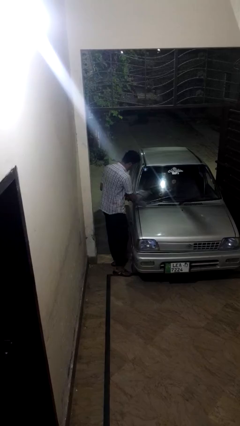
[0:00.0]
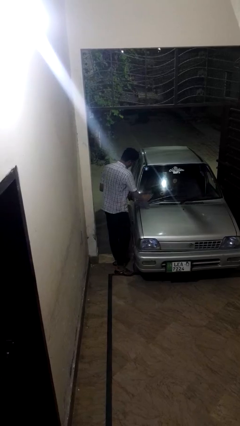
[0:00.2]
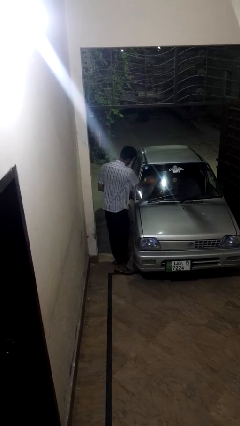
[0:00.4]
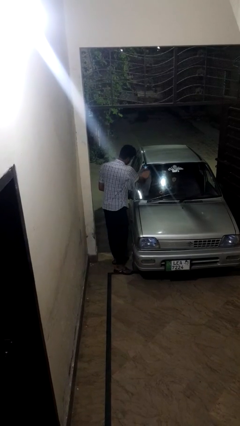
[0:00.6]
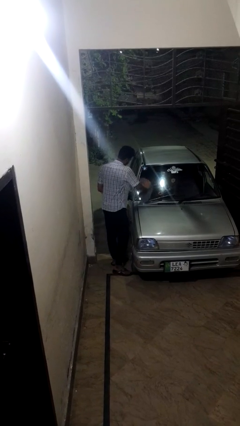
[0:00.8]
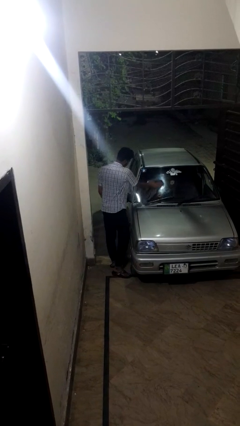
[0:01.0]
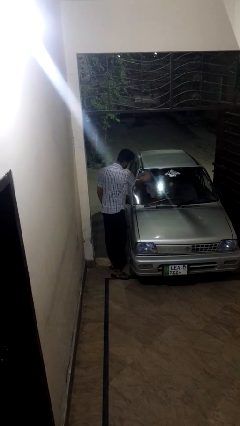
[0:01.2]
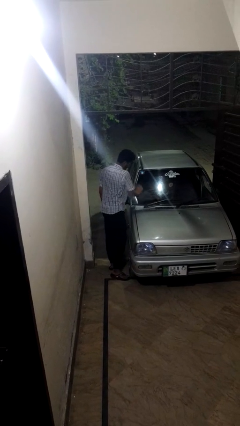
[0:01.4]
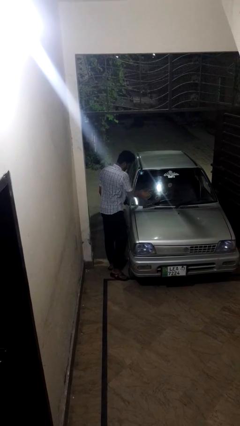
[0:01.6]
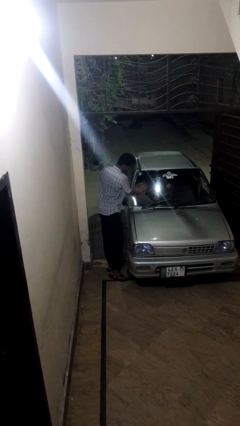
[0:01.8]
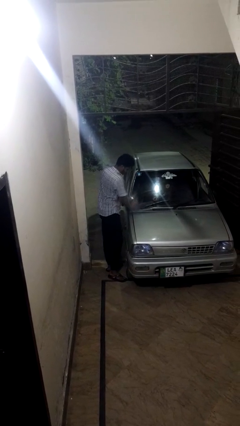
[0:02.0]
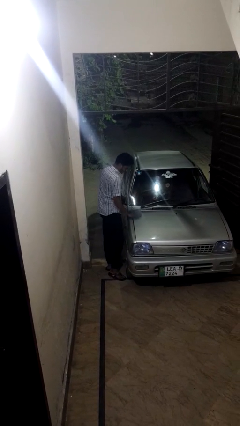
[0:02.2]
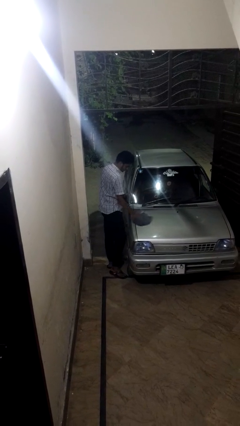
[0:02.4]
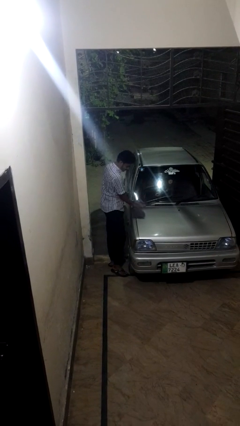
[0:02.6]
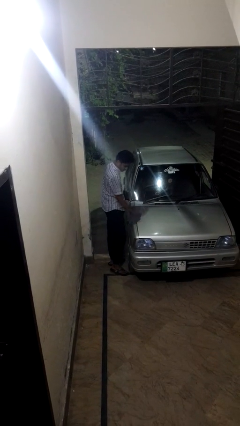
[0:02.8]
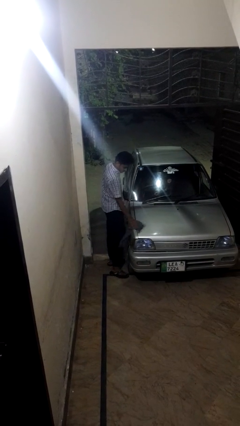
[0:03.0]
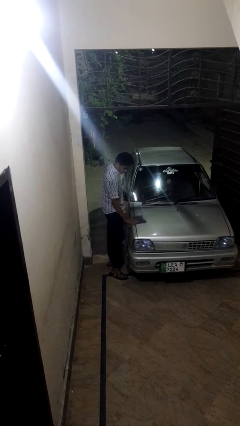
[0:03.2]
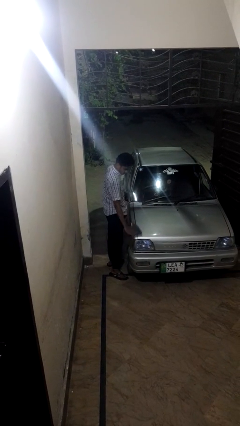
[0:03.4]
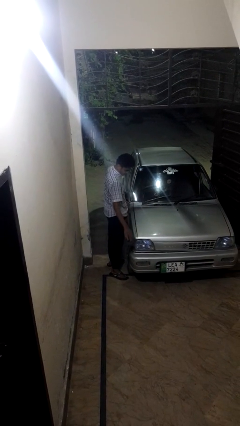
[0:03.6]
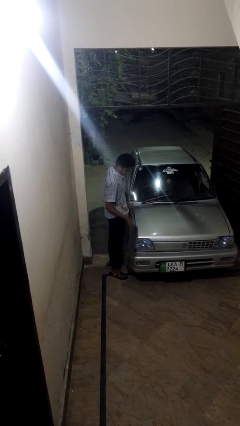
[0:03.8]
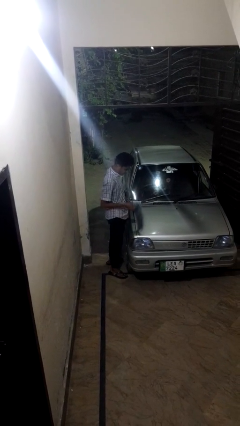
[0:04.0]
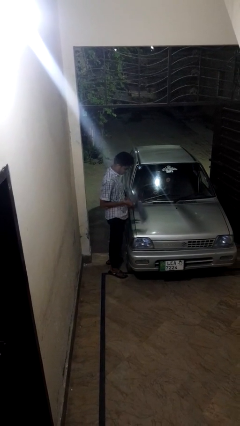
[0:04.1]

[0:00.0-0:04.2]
person polishes car with rag

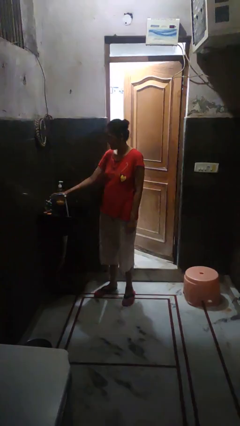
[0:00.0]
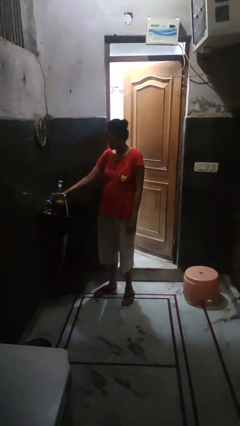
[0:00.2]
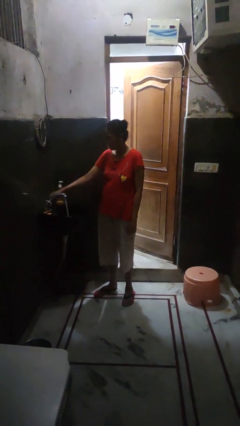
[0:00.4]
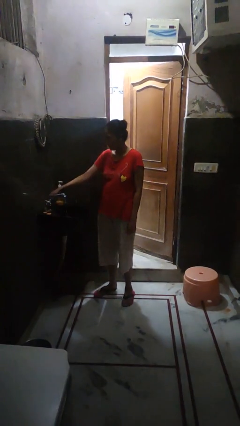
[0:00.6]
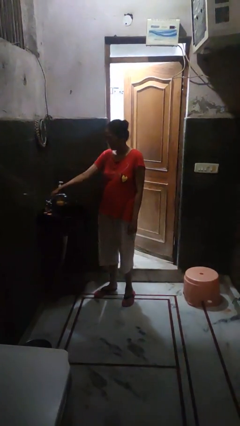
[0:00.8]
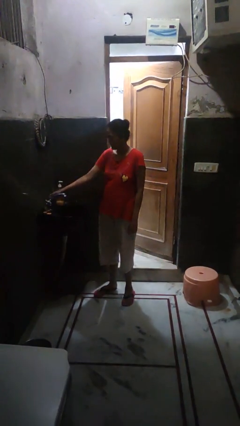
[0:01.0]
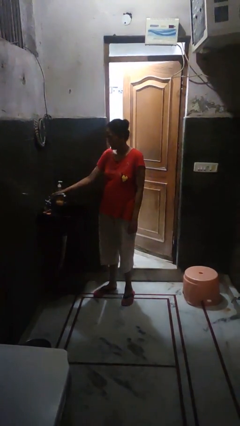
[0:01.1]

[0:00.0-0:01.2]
person turns off faucet

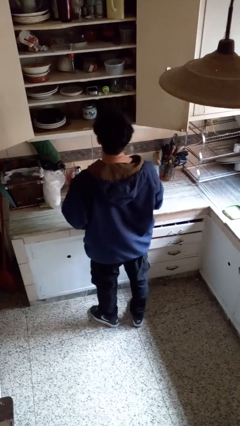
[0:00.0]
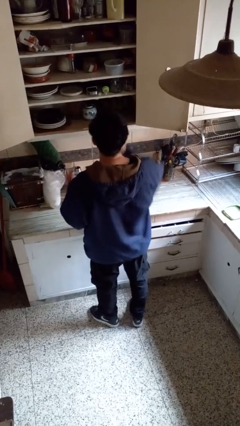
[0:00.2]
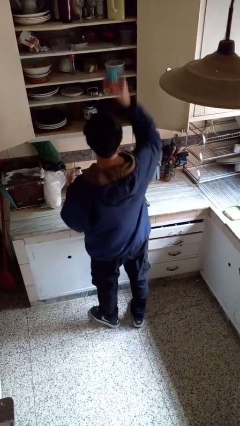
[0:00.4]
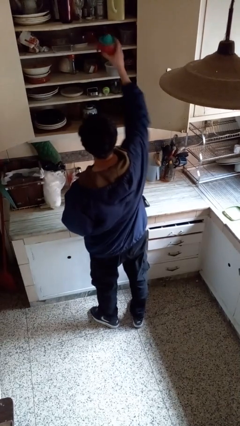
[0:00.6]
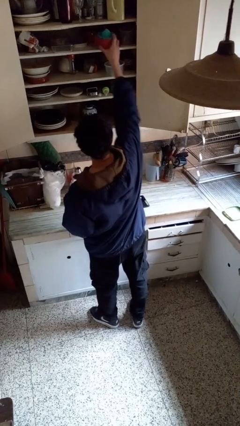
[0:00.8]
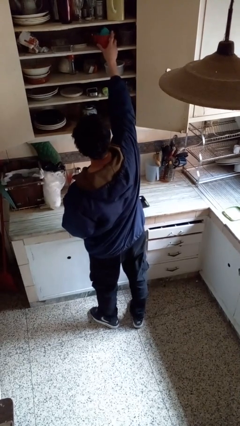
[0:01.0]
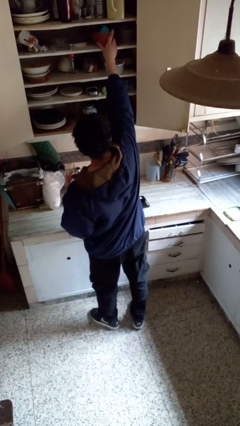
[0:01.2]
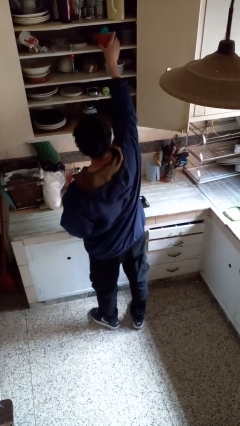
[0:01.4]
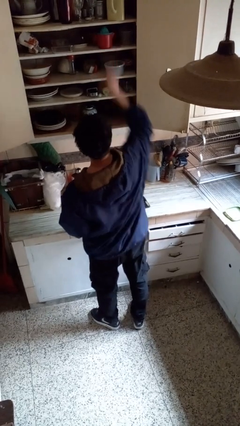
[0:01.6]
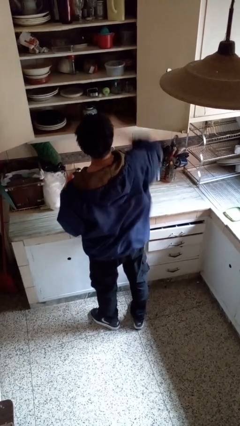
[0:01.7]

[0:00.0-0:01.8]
person puts object in cabinet

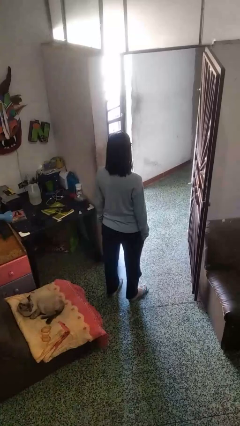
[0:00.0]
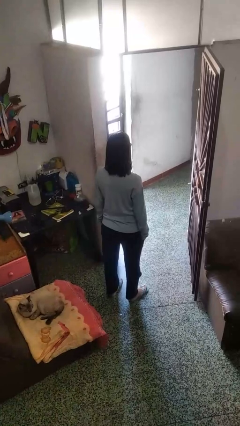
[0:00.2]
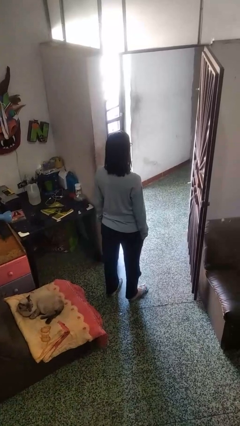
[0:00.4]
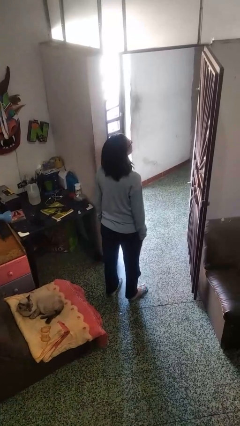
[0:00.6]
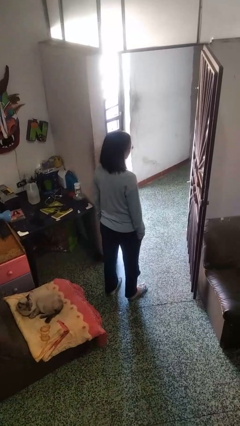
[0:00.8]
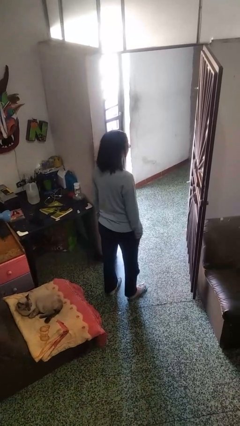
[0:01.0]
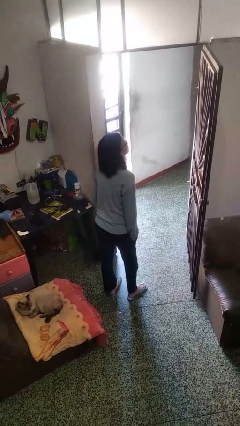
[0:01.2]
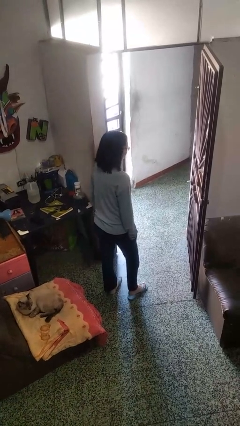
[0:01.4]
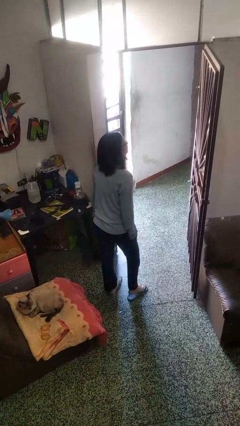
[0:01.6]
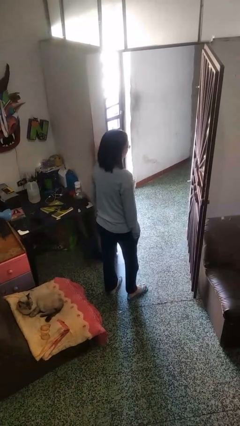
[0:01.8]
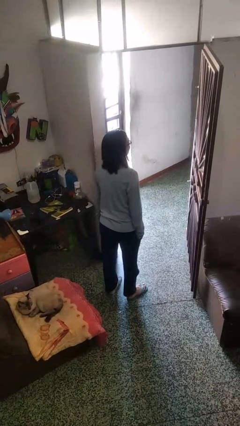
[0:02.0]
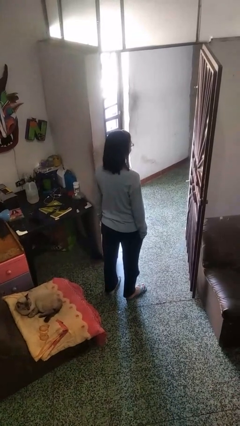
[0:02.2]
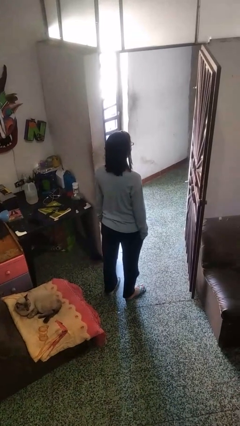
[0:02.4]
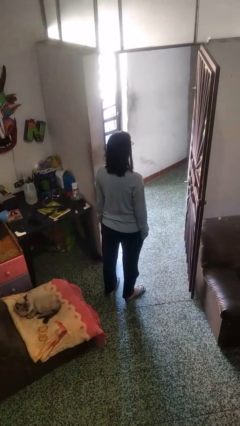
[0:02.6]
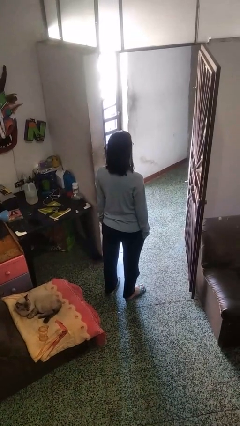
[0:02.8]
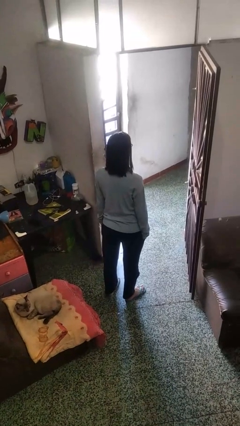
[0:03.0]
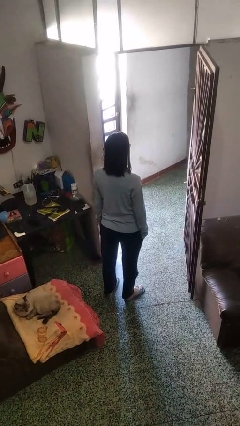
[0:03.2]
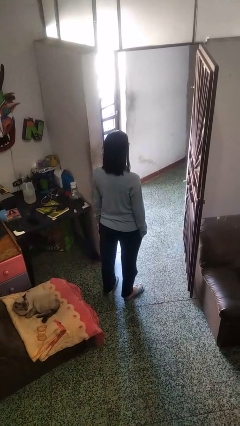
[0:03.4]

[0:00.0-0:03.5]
person nods head

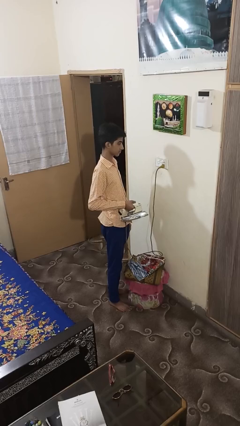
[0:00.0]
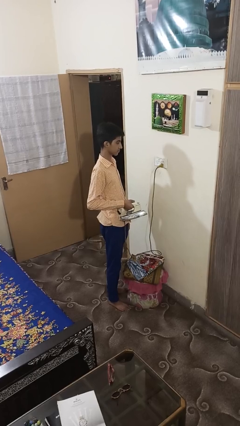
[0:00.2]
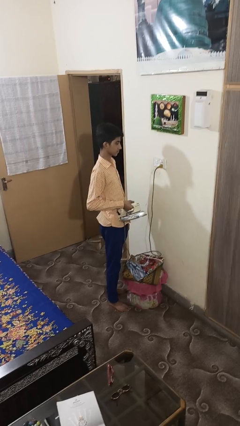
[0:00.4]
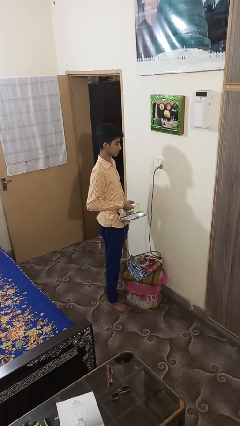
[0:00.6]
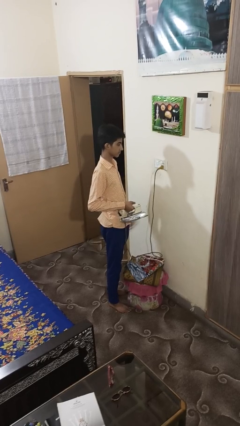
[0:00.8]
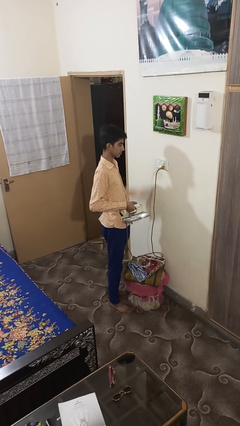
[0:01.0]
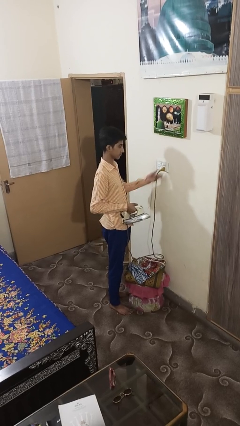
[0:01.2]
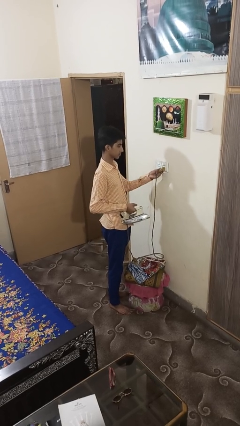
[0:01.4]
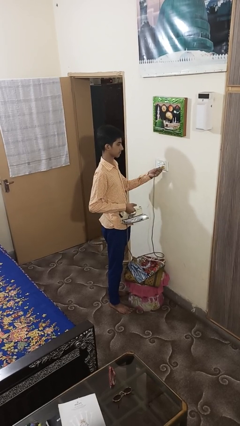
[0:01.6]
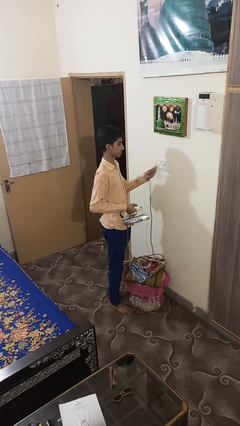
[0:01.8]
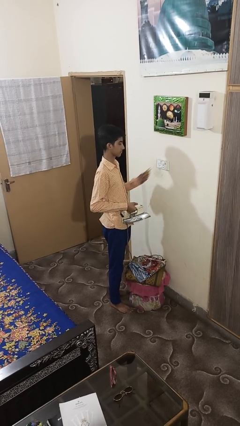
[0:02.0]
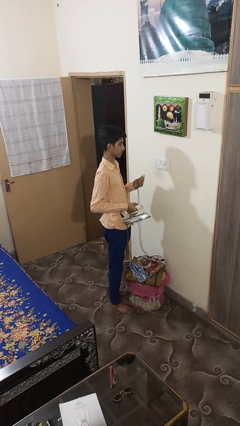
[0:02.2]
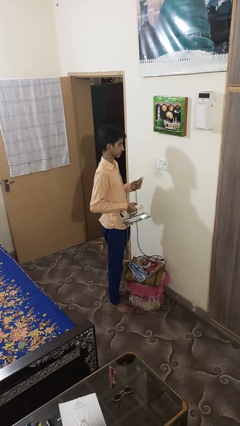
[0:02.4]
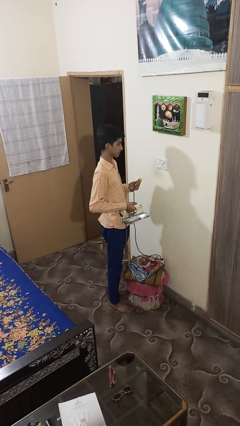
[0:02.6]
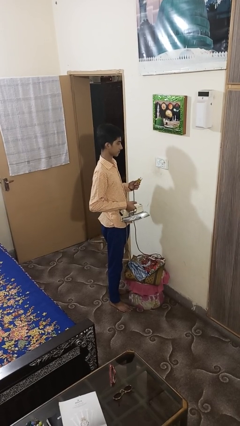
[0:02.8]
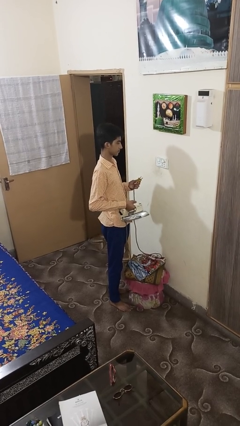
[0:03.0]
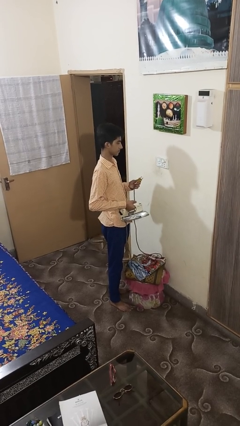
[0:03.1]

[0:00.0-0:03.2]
person unplugs from electrical socket

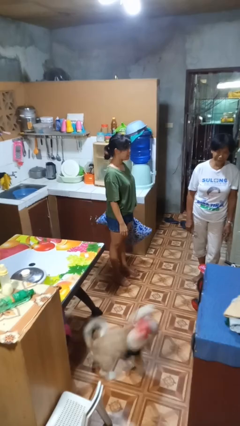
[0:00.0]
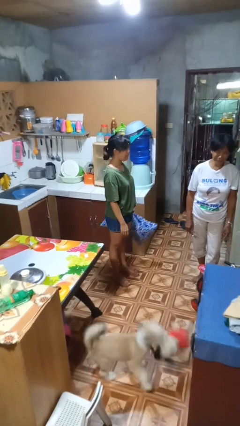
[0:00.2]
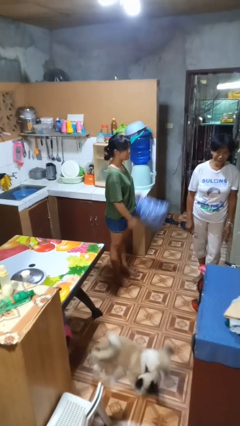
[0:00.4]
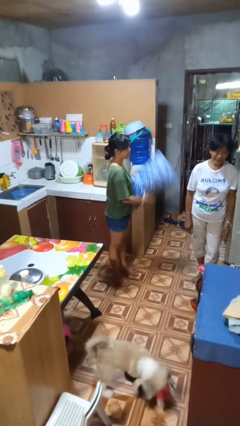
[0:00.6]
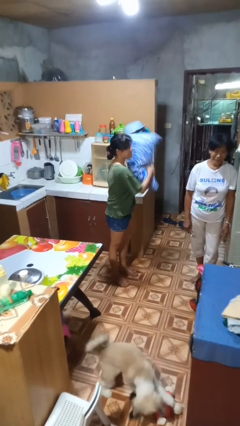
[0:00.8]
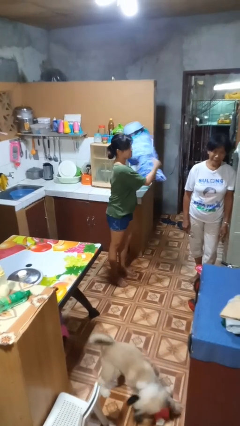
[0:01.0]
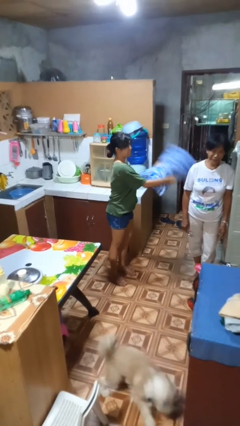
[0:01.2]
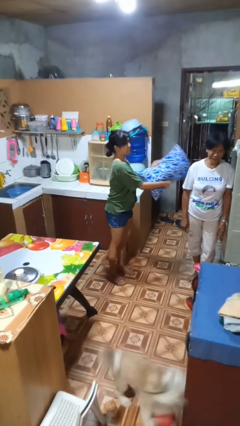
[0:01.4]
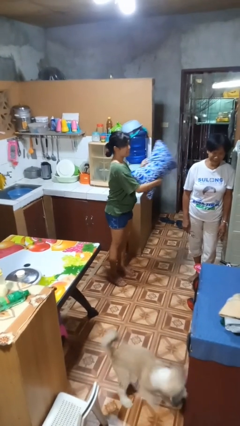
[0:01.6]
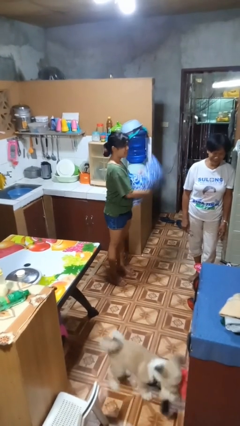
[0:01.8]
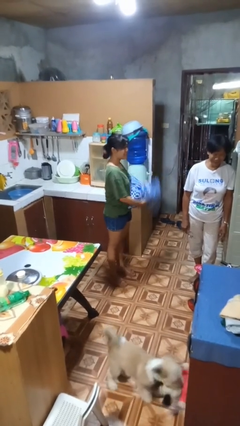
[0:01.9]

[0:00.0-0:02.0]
person hits person with pillow

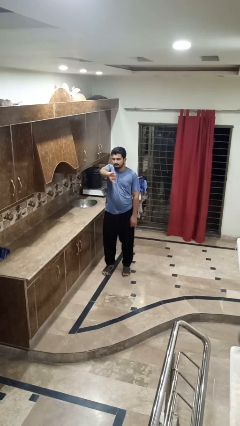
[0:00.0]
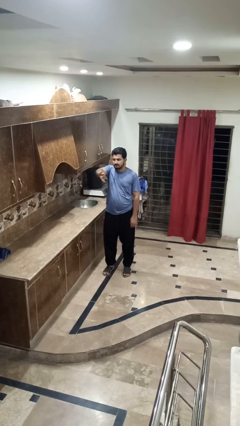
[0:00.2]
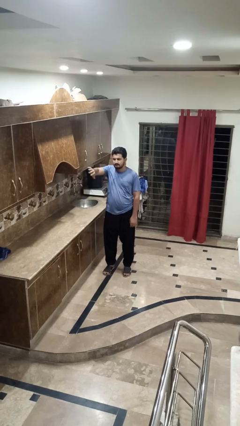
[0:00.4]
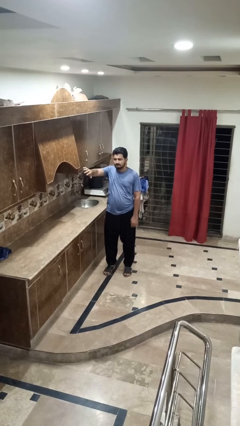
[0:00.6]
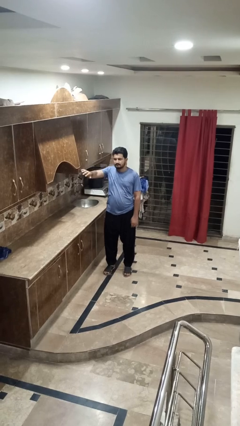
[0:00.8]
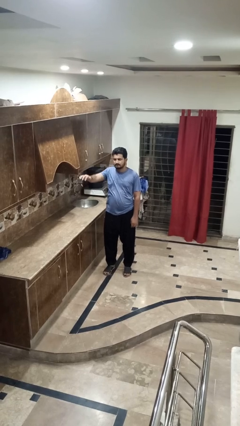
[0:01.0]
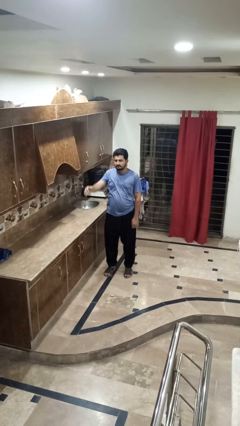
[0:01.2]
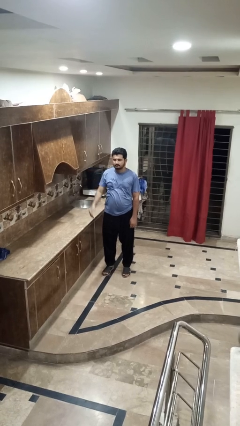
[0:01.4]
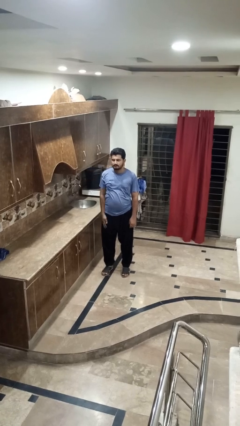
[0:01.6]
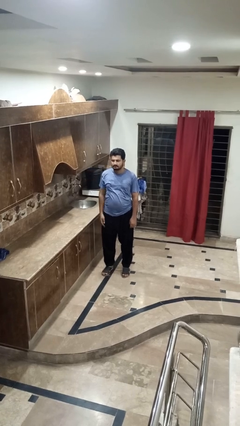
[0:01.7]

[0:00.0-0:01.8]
person gestures swipe right
